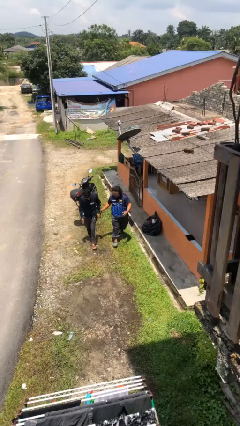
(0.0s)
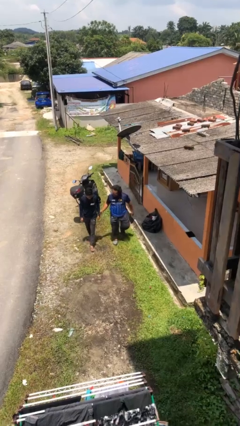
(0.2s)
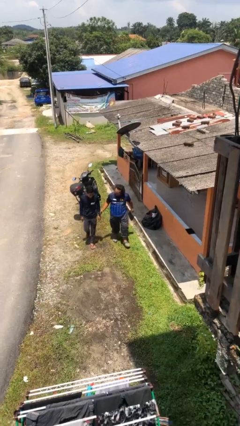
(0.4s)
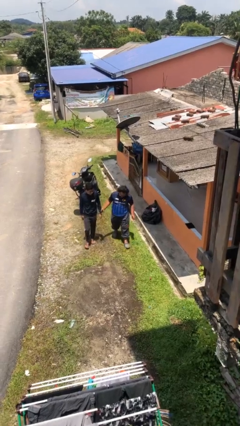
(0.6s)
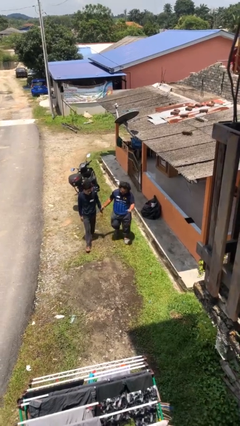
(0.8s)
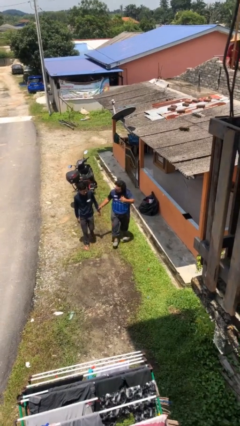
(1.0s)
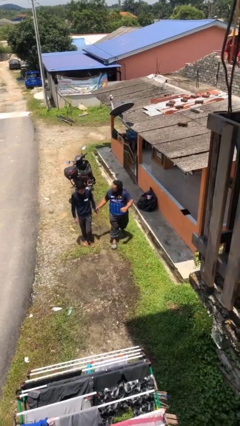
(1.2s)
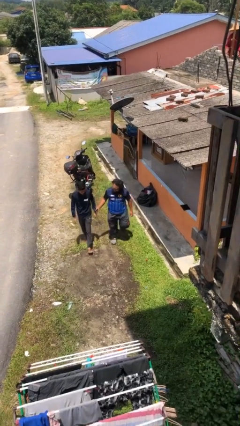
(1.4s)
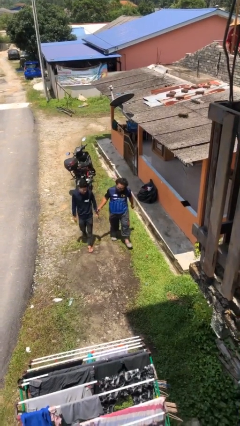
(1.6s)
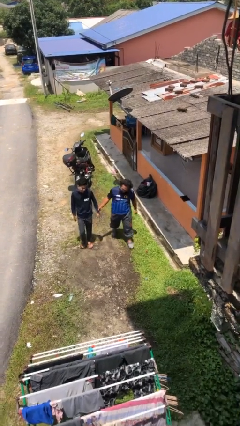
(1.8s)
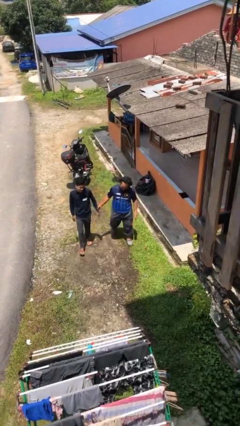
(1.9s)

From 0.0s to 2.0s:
person holds hand

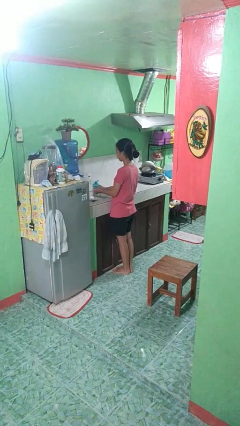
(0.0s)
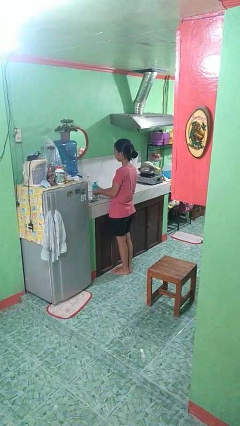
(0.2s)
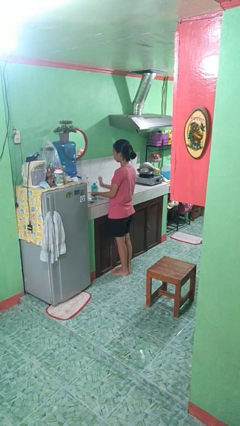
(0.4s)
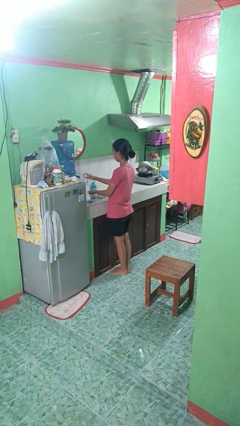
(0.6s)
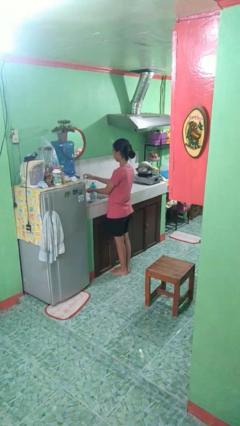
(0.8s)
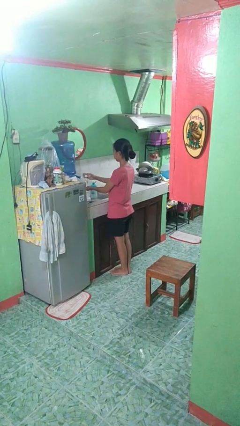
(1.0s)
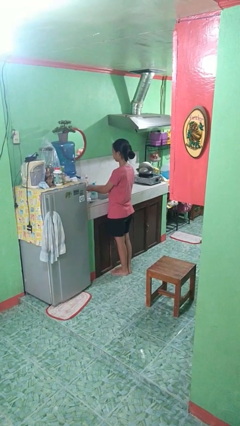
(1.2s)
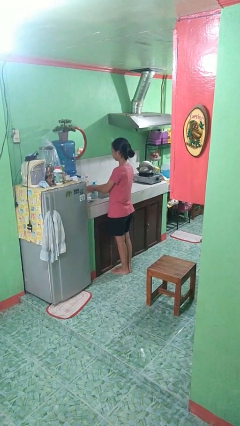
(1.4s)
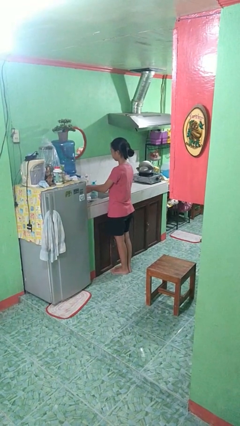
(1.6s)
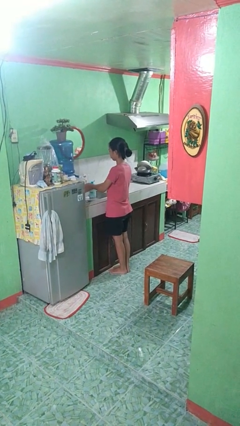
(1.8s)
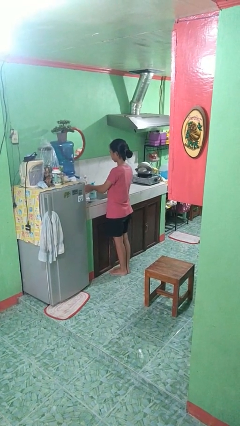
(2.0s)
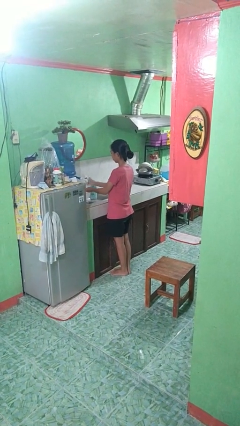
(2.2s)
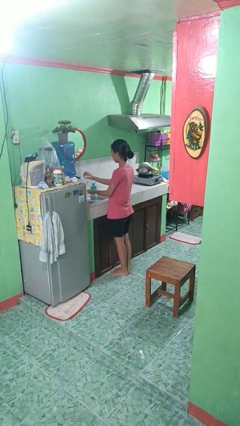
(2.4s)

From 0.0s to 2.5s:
person washes hands

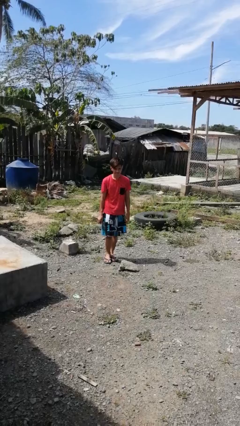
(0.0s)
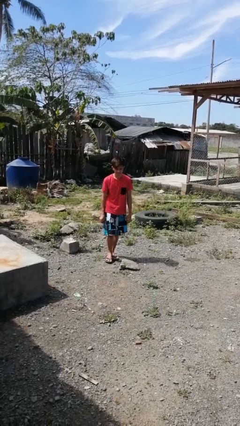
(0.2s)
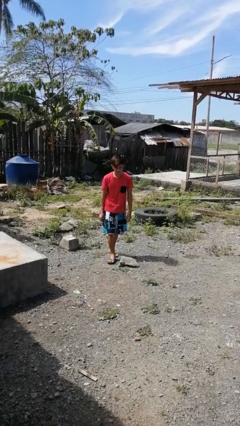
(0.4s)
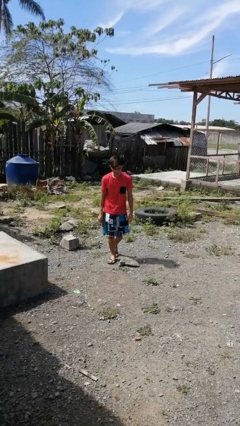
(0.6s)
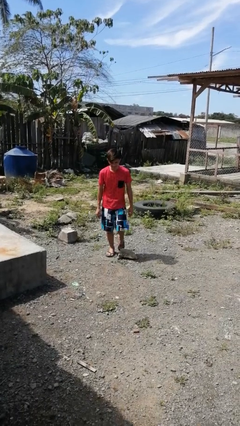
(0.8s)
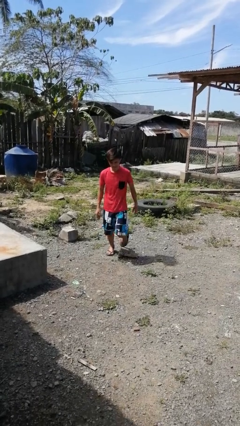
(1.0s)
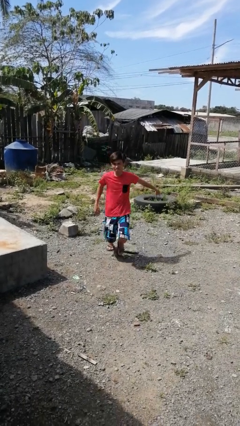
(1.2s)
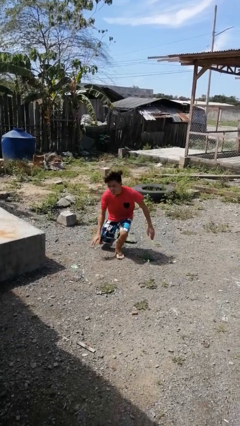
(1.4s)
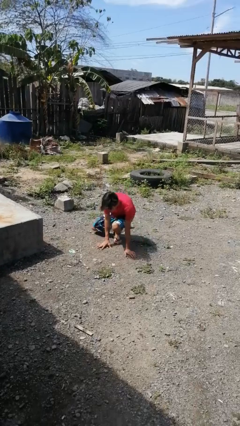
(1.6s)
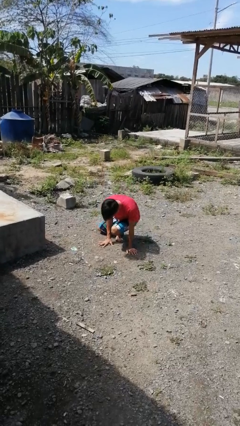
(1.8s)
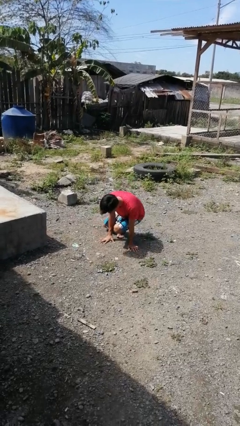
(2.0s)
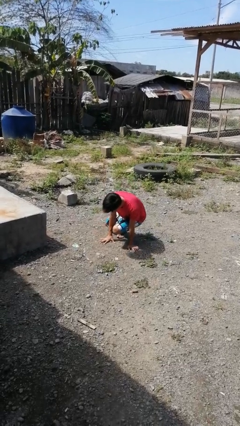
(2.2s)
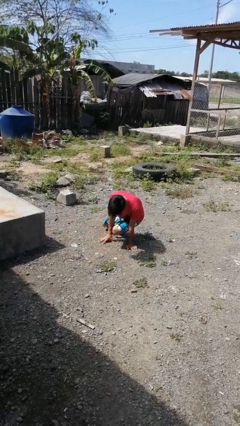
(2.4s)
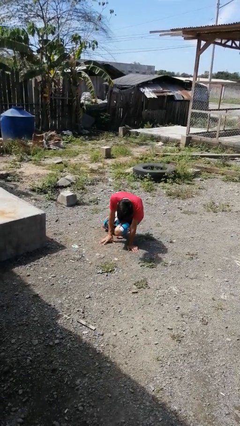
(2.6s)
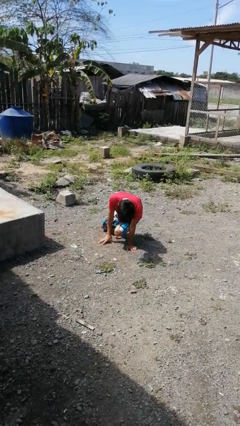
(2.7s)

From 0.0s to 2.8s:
person trips on object on floor

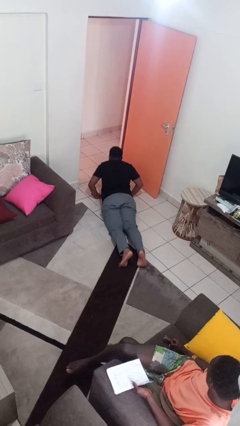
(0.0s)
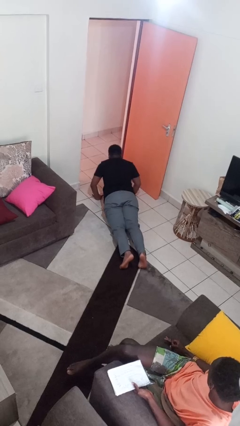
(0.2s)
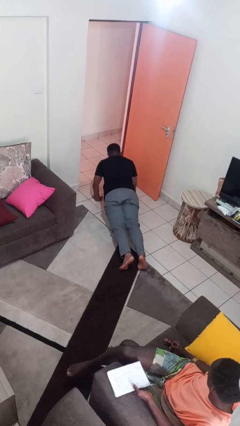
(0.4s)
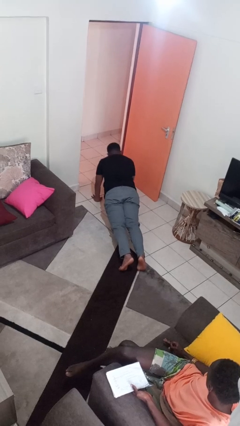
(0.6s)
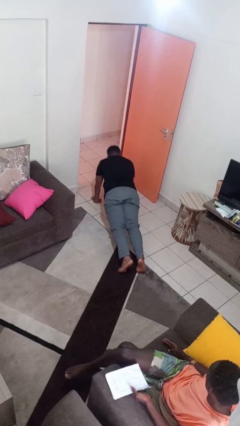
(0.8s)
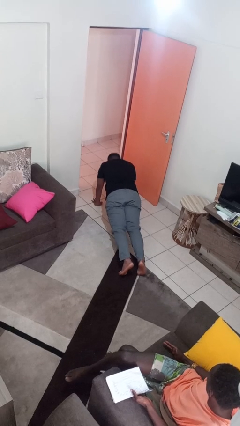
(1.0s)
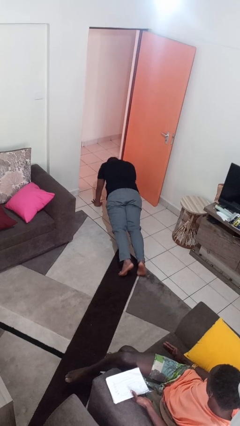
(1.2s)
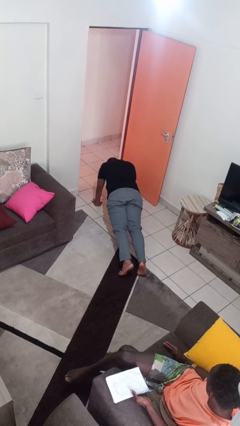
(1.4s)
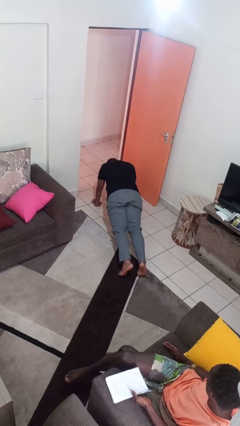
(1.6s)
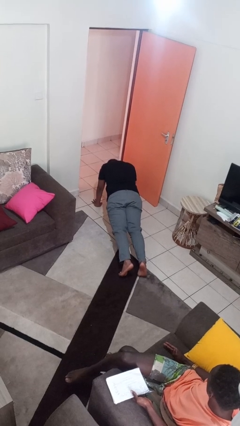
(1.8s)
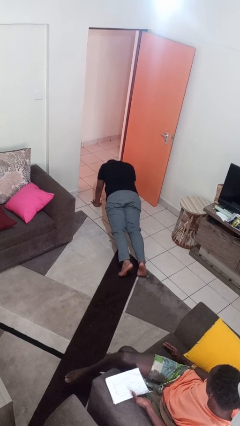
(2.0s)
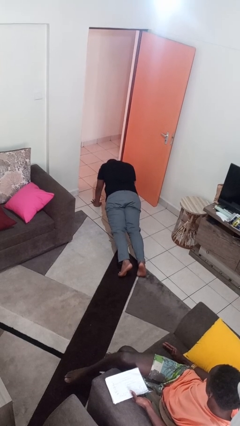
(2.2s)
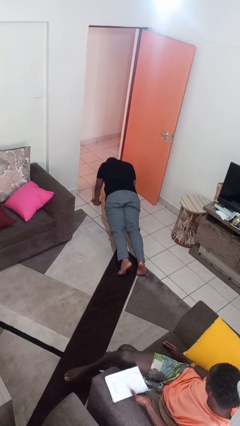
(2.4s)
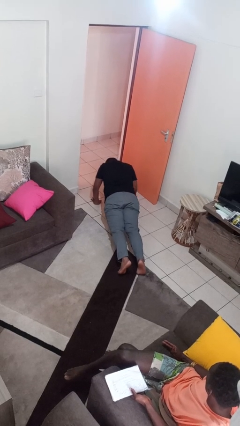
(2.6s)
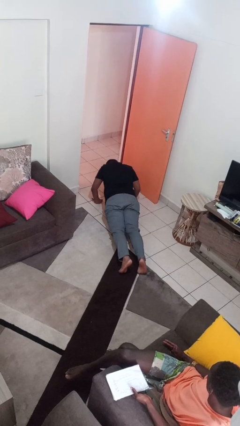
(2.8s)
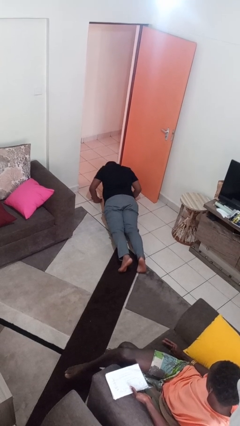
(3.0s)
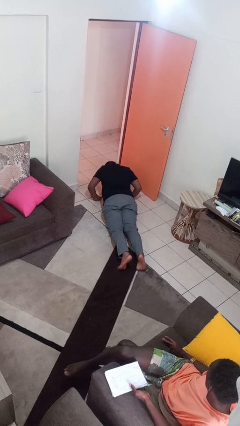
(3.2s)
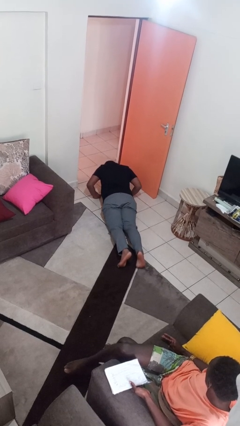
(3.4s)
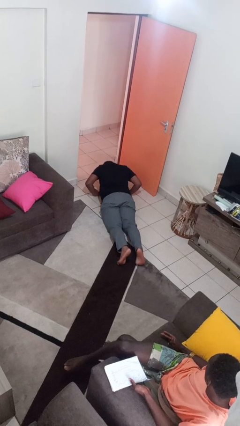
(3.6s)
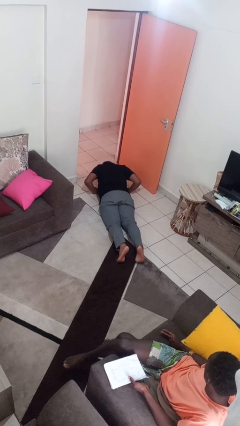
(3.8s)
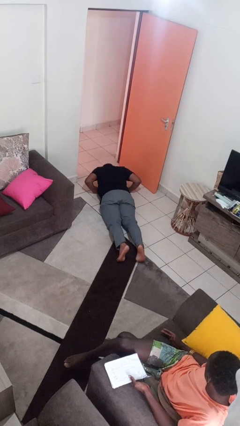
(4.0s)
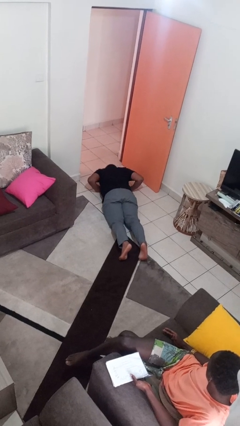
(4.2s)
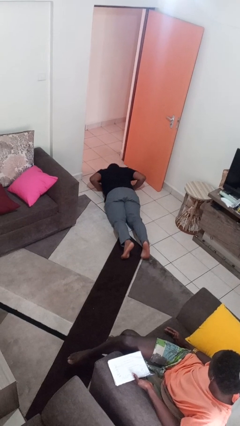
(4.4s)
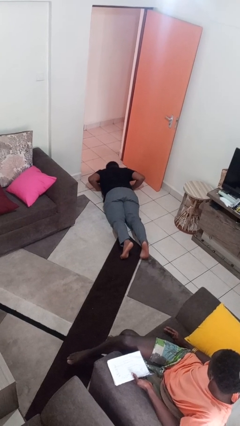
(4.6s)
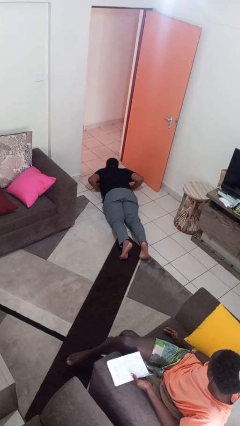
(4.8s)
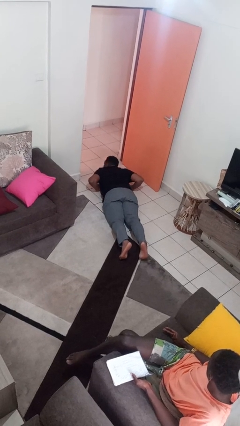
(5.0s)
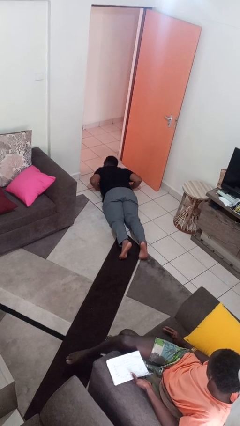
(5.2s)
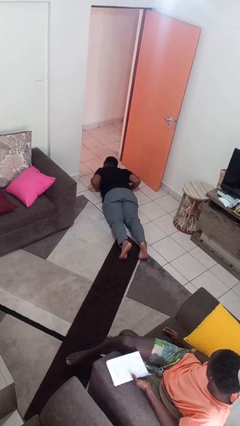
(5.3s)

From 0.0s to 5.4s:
person exercises with pushup

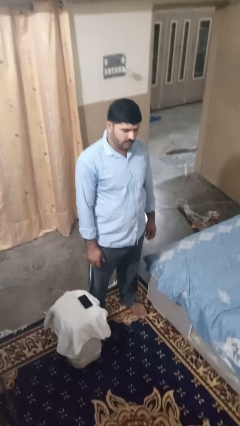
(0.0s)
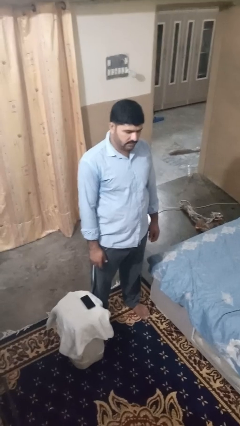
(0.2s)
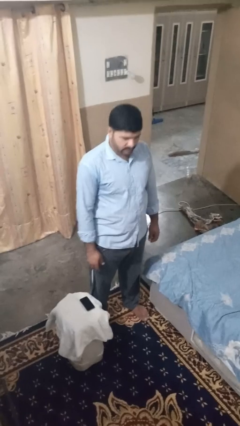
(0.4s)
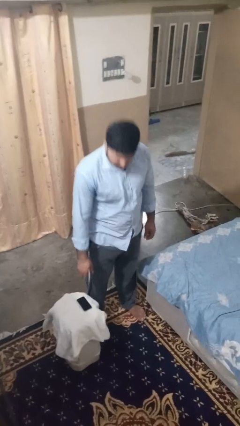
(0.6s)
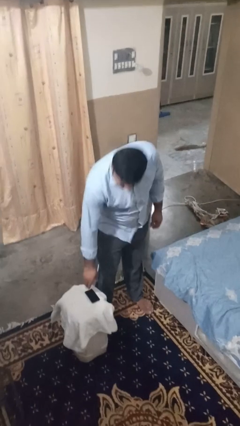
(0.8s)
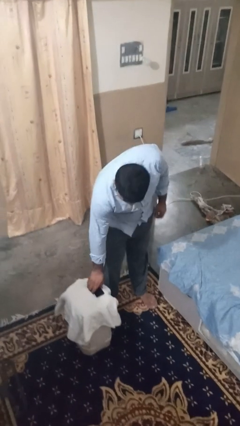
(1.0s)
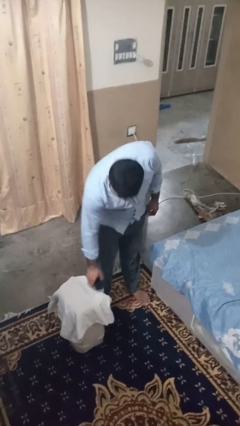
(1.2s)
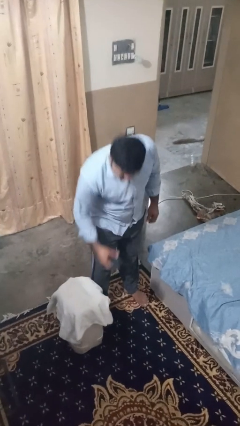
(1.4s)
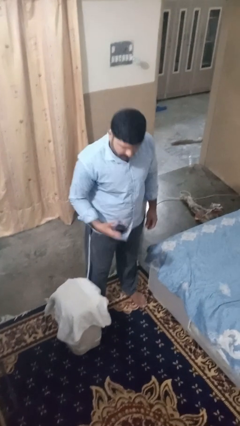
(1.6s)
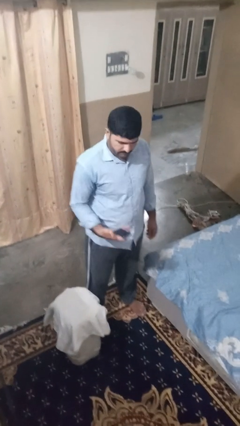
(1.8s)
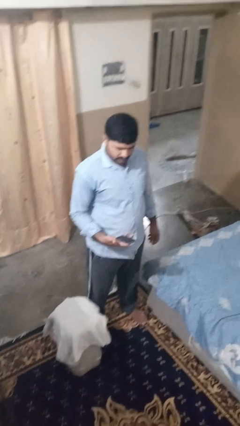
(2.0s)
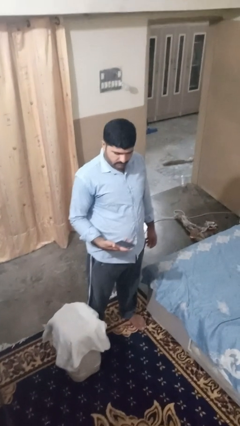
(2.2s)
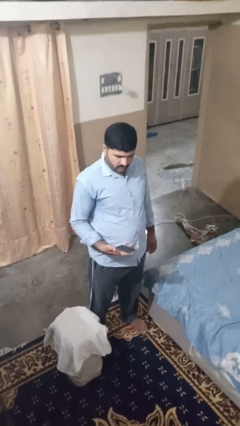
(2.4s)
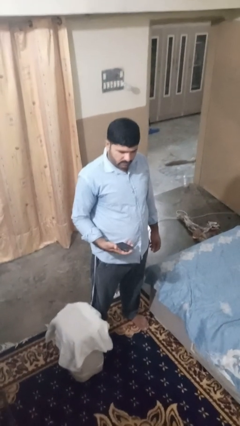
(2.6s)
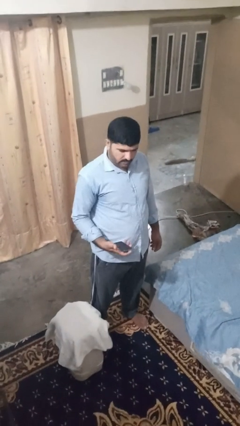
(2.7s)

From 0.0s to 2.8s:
person takes phone from pocket

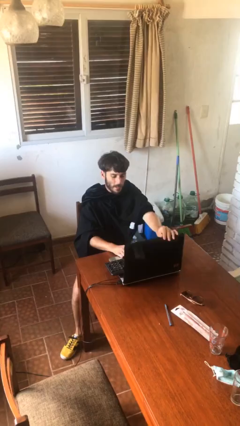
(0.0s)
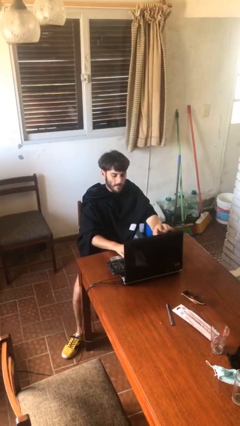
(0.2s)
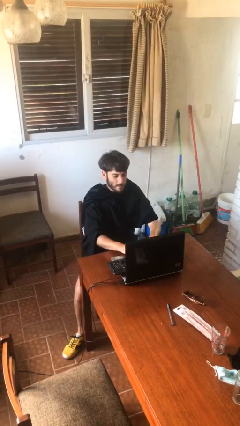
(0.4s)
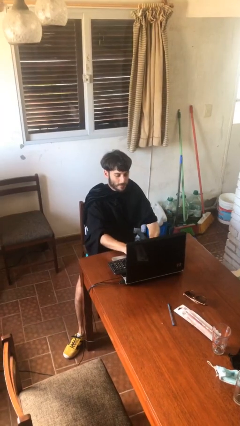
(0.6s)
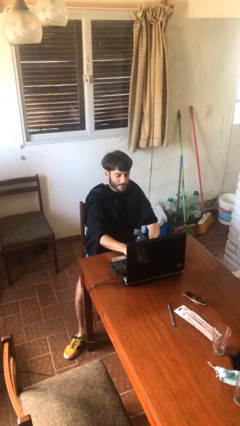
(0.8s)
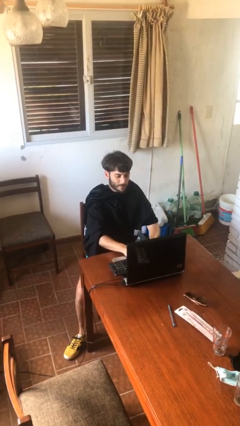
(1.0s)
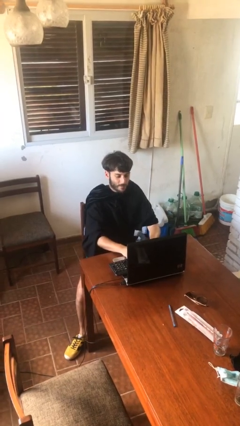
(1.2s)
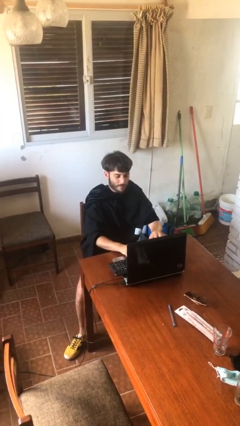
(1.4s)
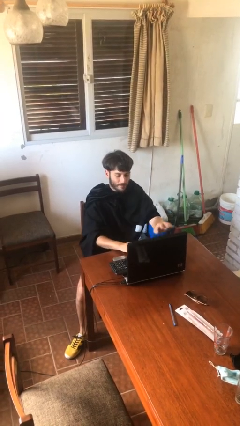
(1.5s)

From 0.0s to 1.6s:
person interacts with laptop

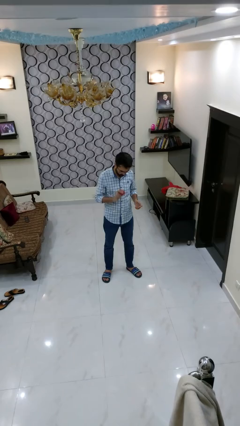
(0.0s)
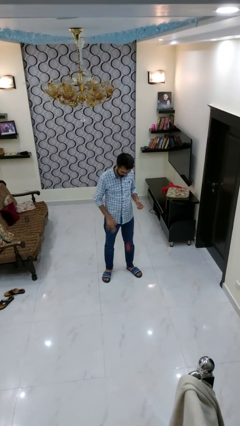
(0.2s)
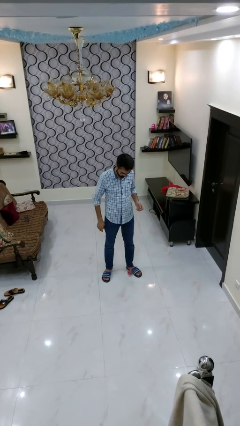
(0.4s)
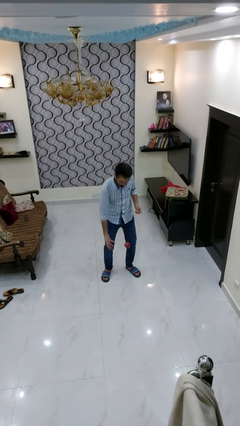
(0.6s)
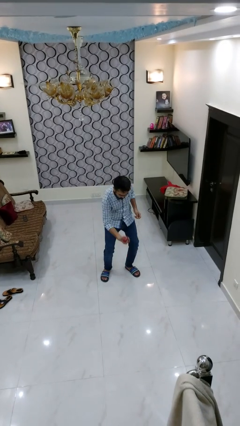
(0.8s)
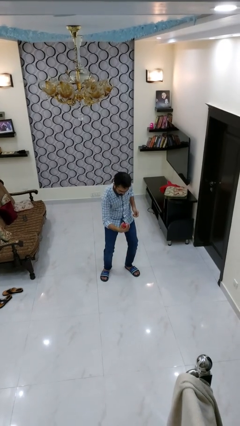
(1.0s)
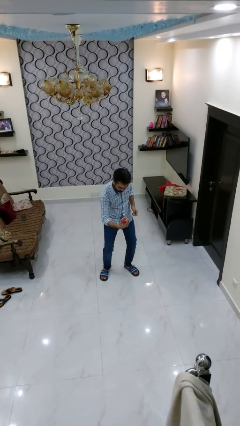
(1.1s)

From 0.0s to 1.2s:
person bounces ball on floor
